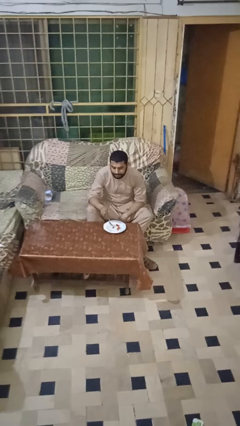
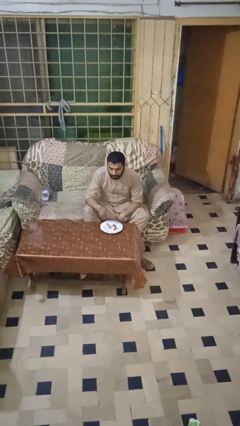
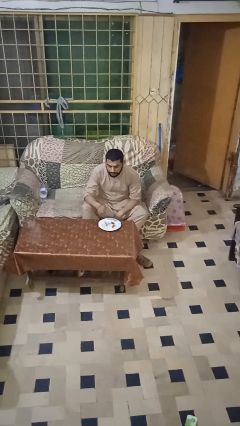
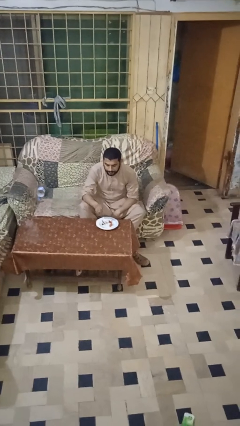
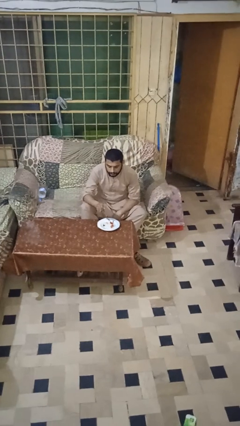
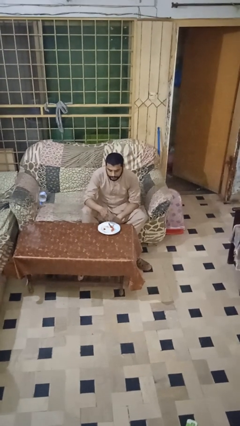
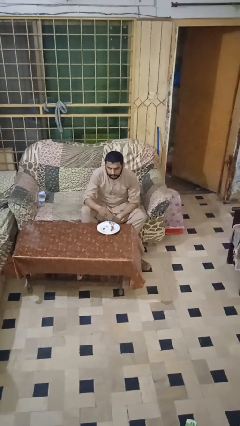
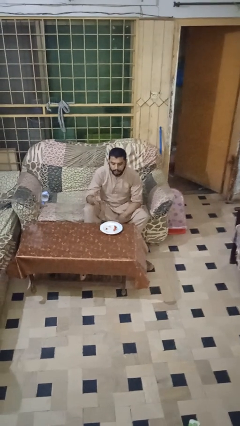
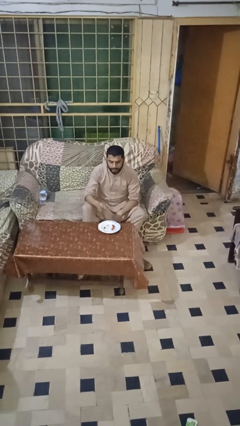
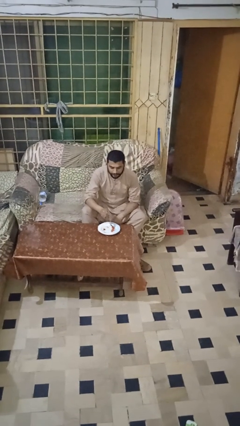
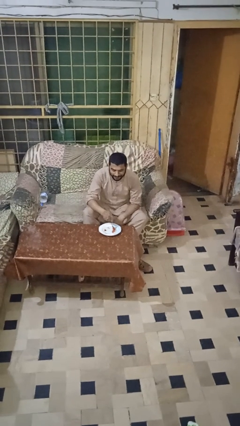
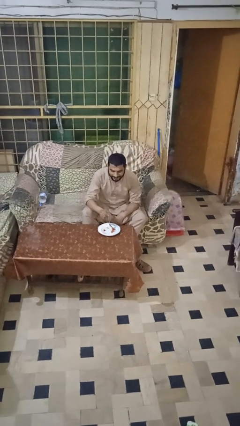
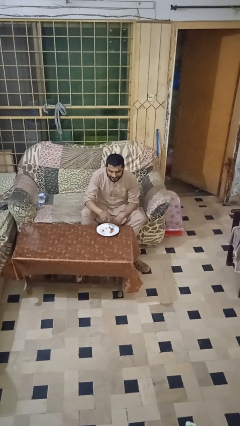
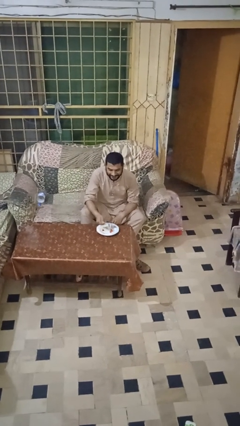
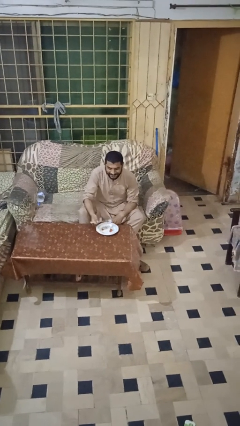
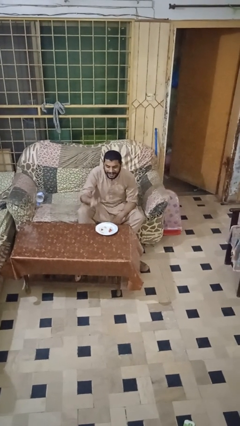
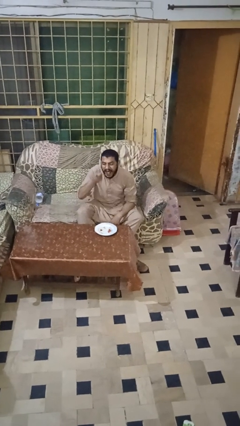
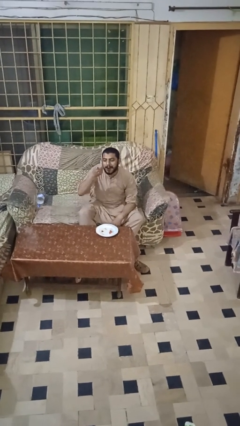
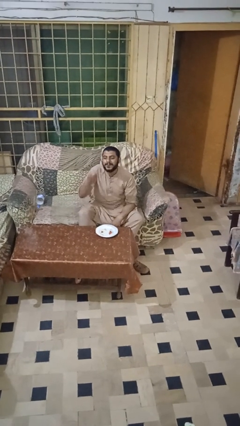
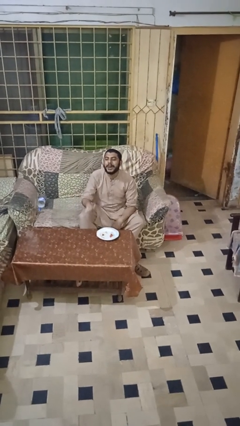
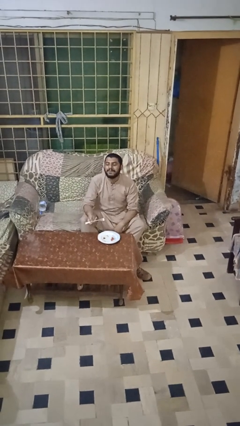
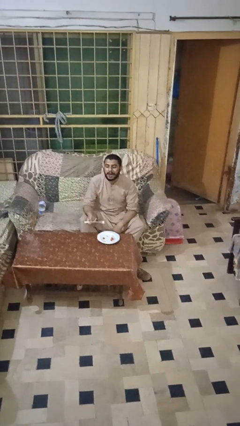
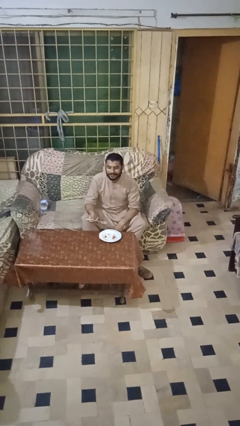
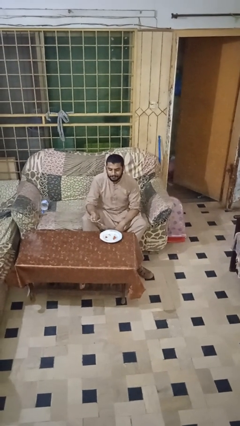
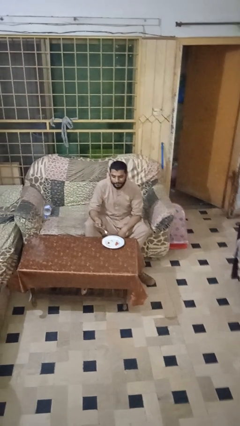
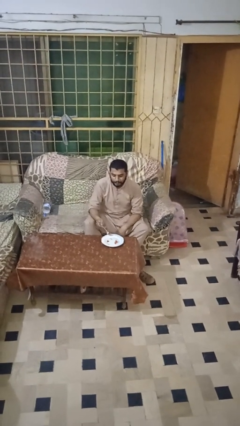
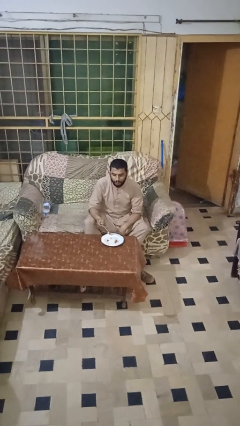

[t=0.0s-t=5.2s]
person eats with utensil

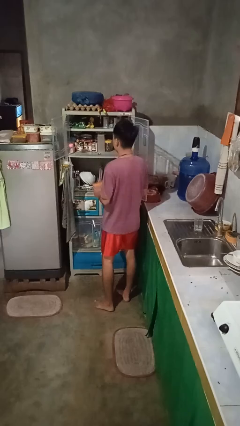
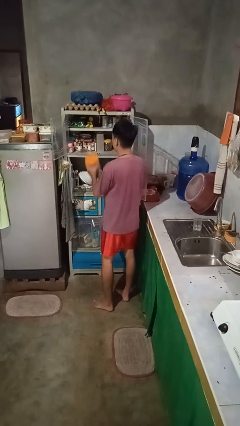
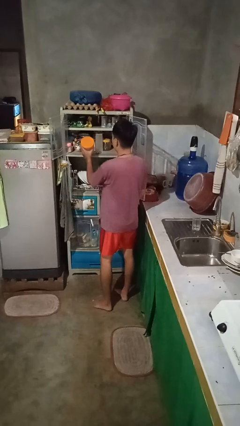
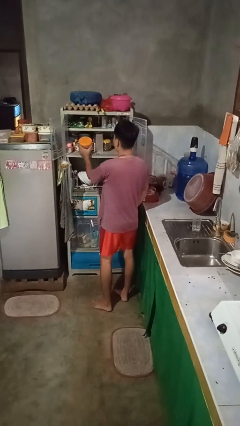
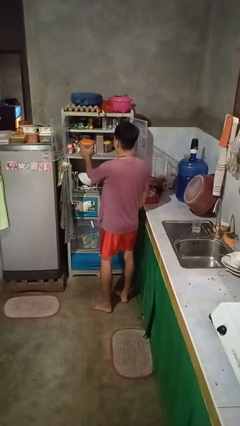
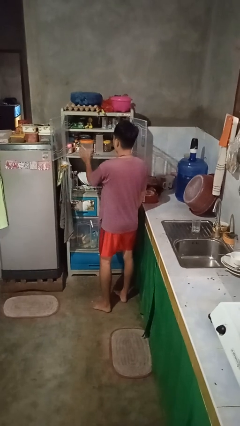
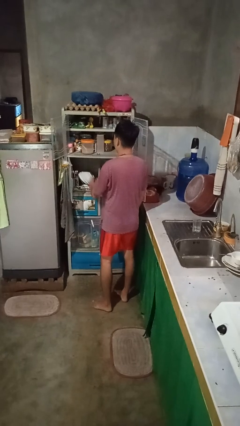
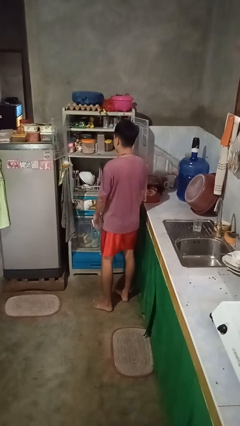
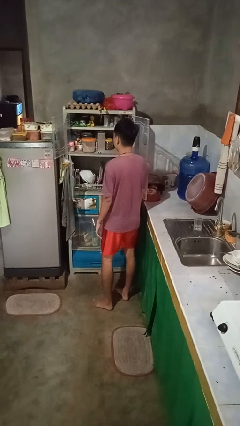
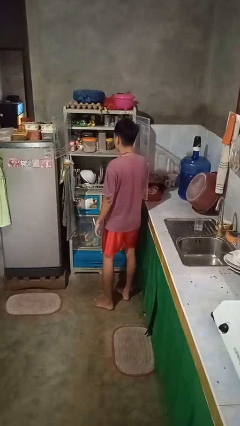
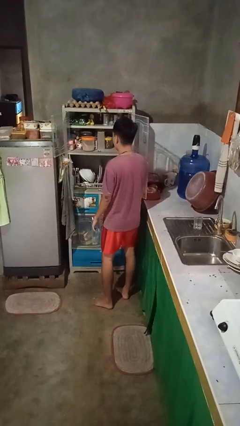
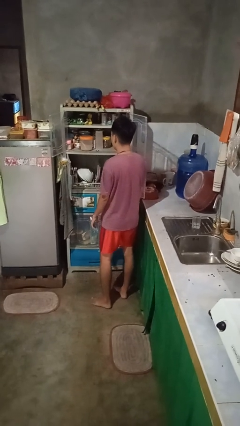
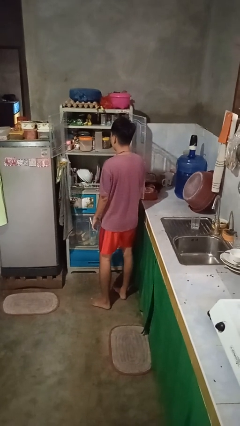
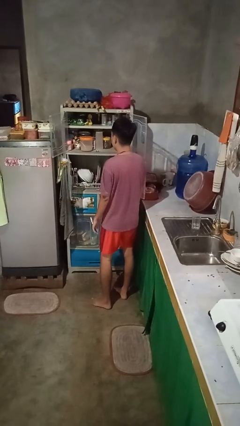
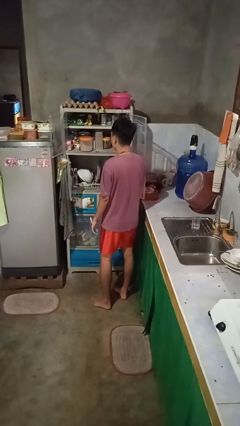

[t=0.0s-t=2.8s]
person puts object in cabinet

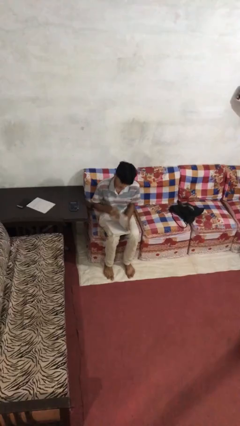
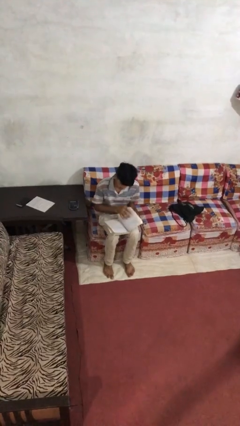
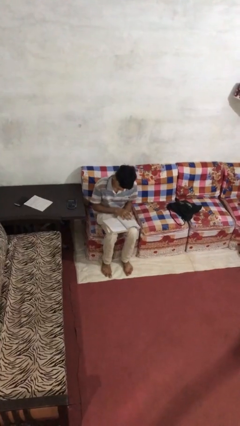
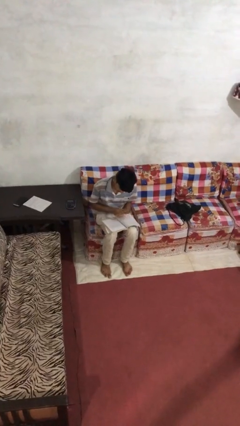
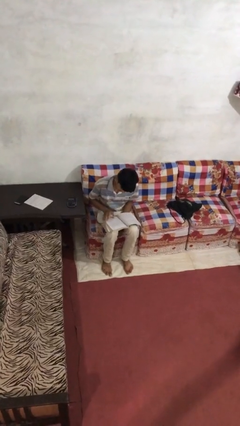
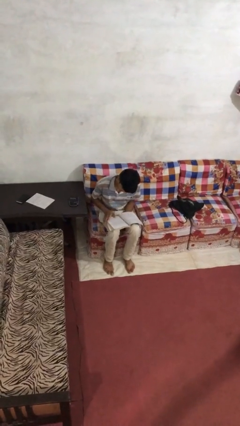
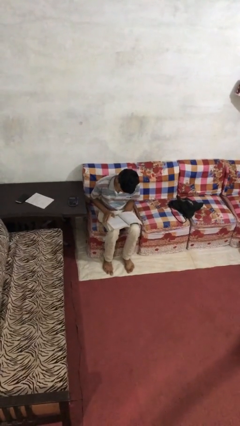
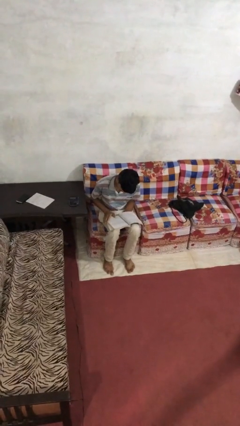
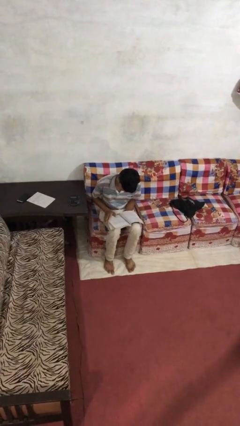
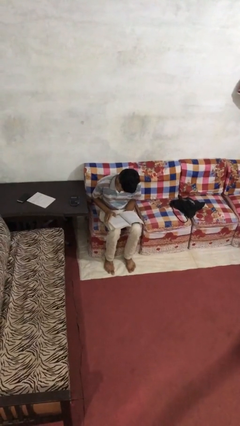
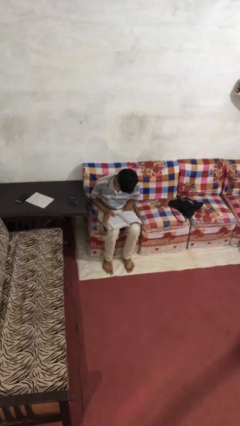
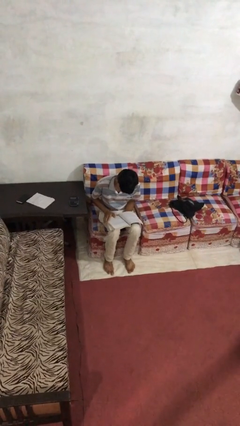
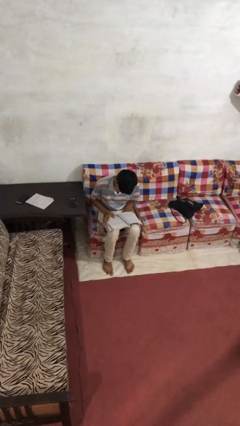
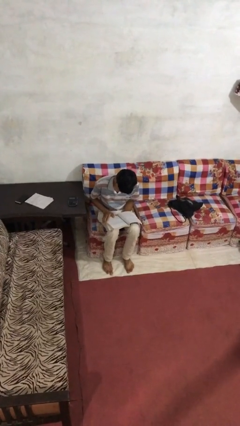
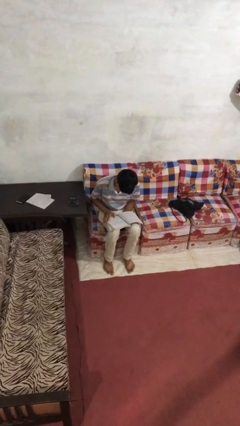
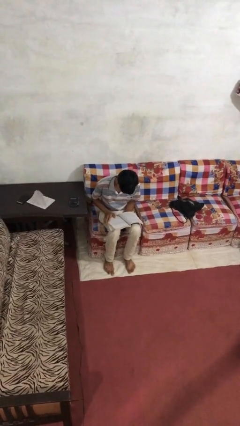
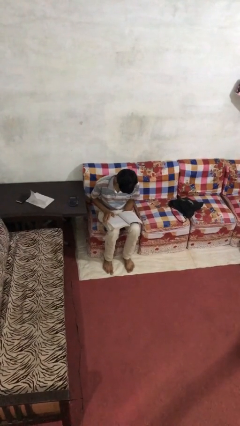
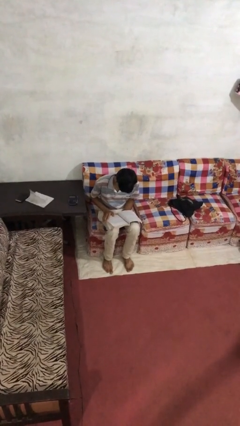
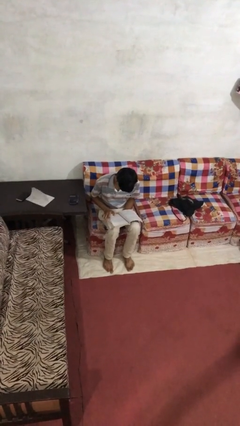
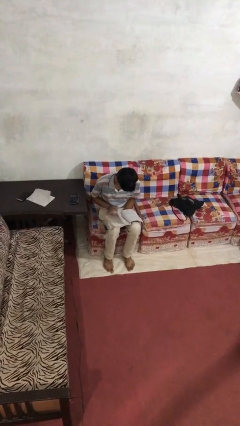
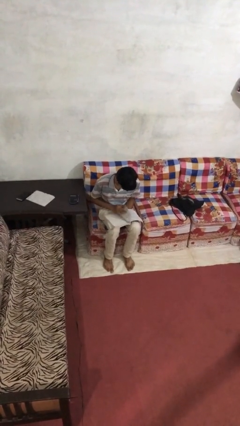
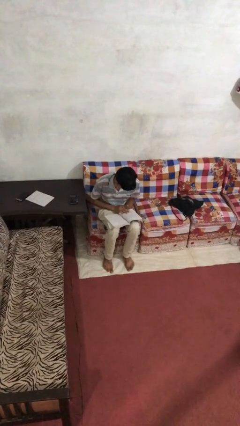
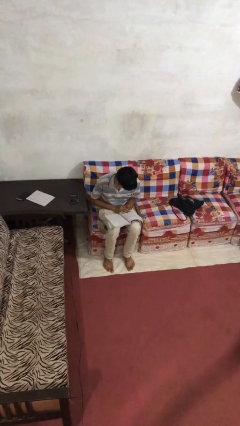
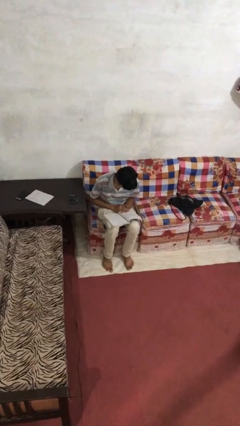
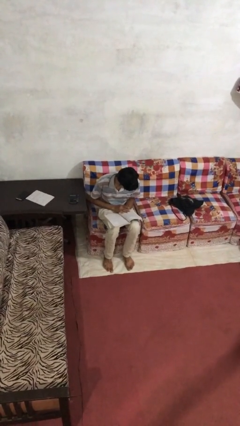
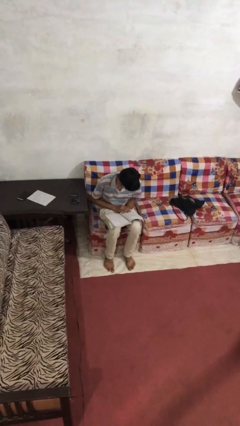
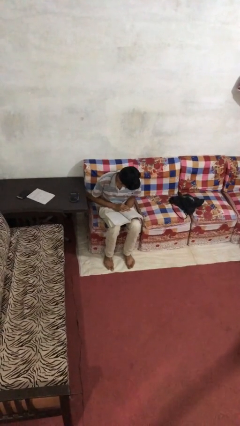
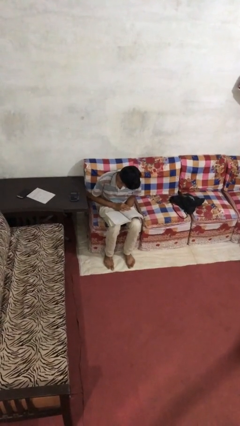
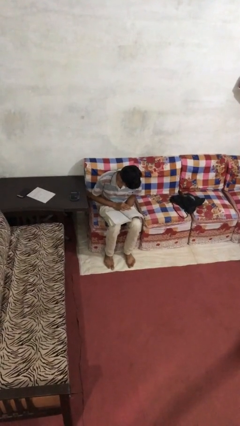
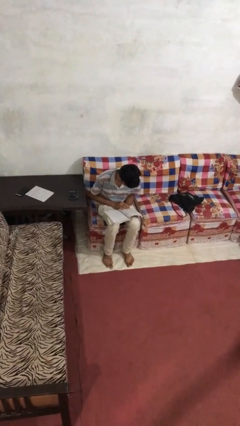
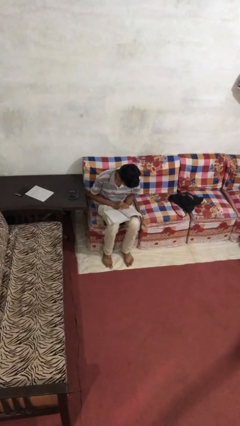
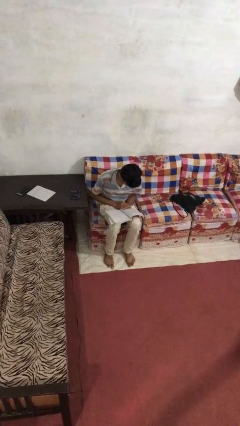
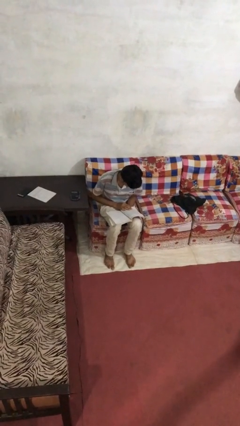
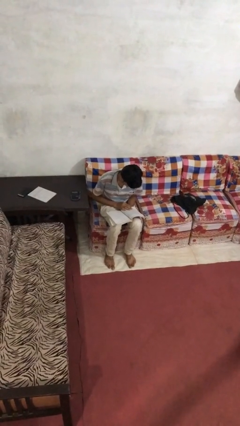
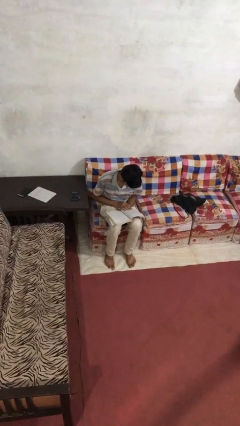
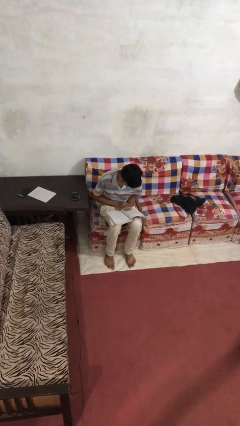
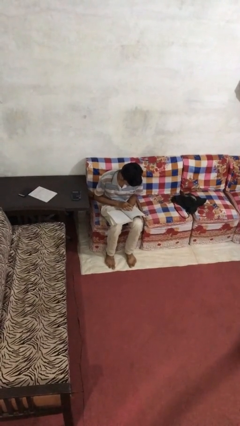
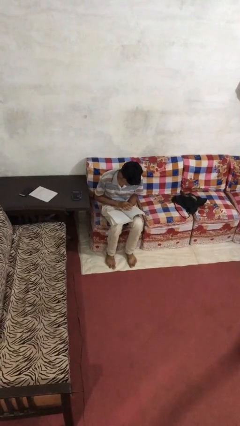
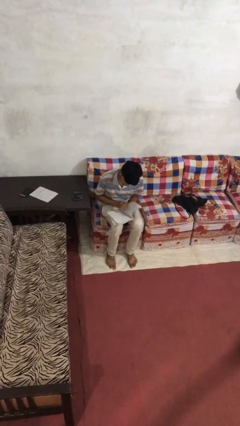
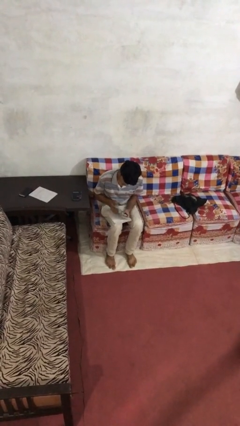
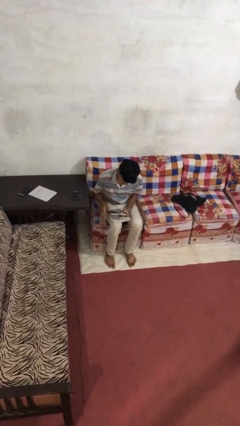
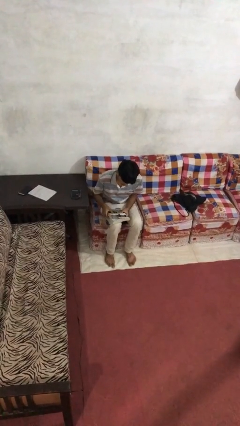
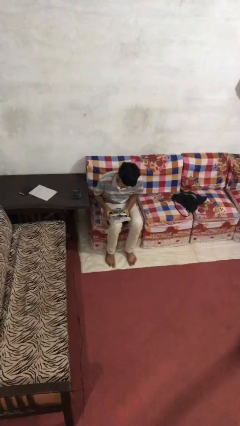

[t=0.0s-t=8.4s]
person reads document

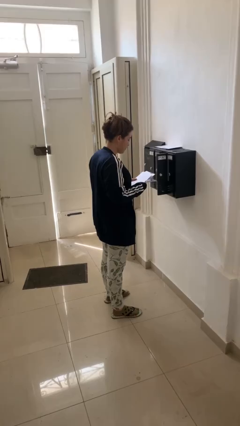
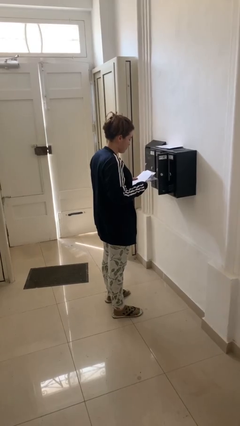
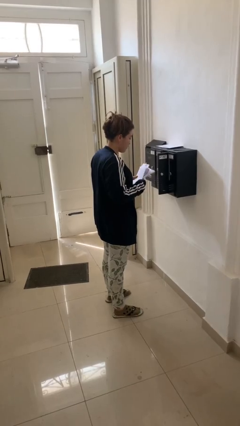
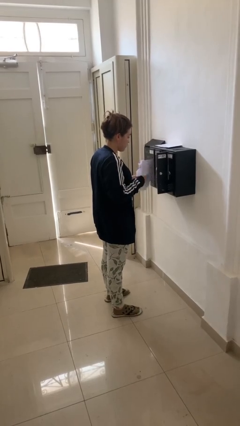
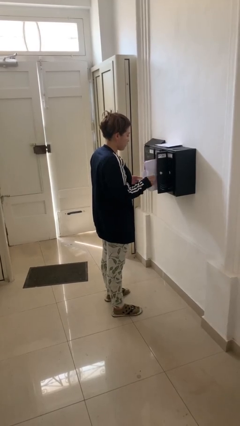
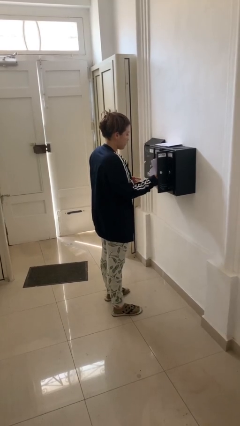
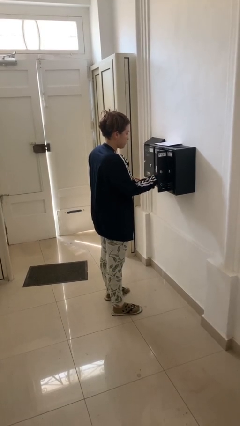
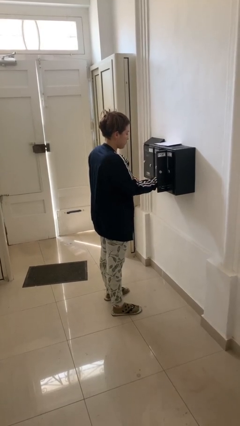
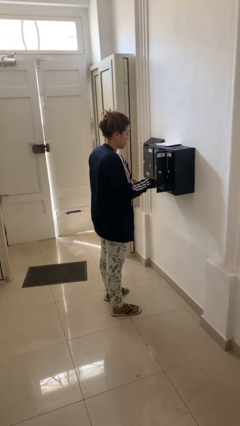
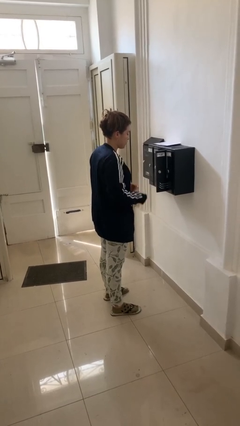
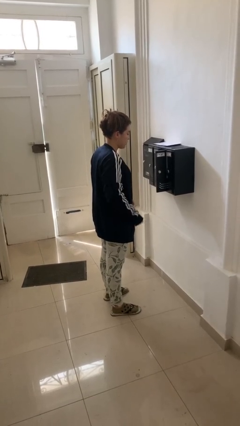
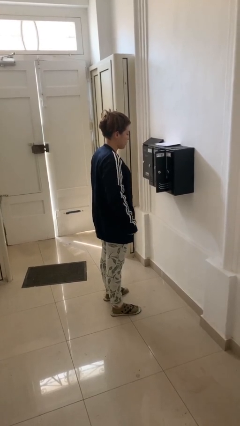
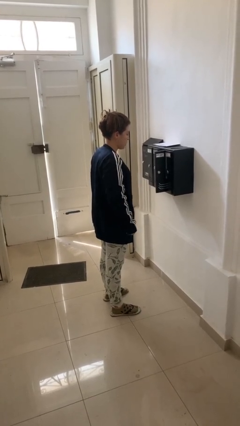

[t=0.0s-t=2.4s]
person puts letters in mailbox
